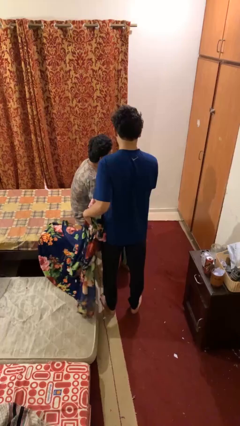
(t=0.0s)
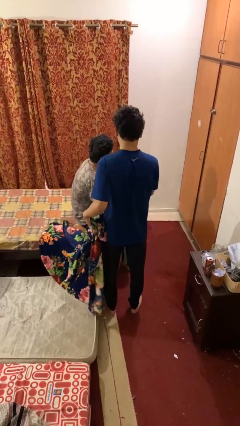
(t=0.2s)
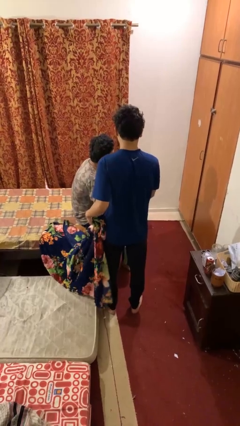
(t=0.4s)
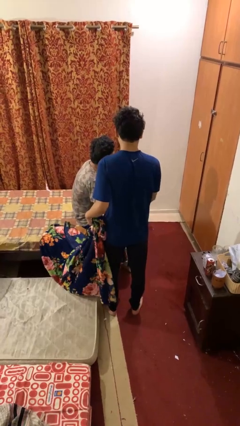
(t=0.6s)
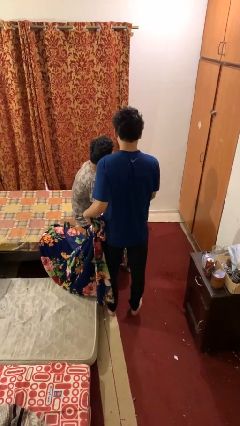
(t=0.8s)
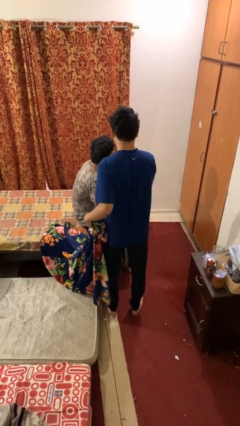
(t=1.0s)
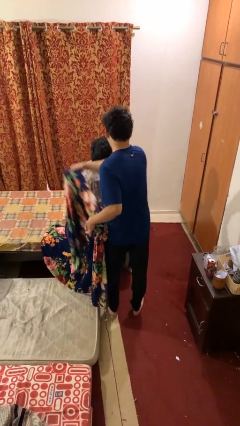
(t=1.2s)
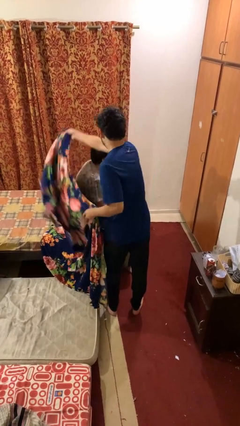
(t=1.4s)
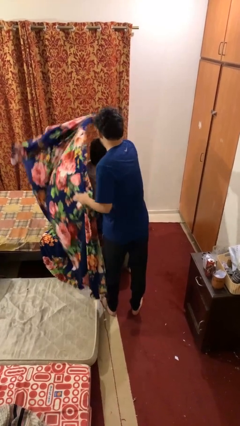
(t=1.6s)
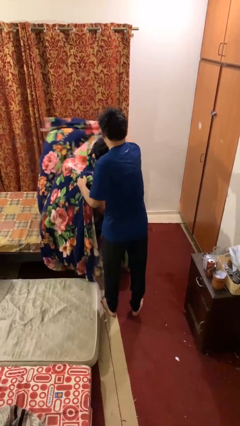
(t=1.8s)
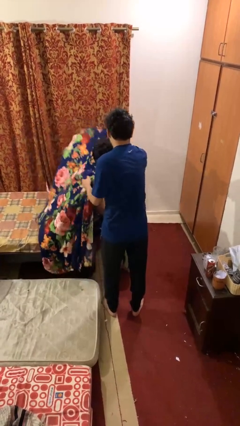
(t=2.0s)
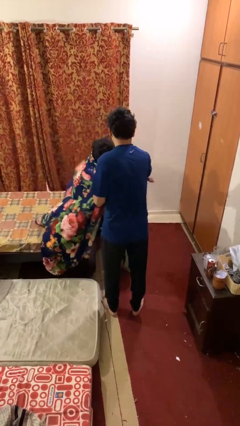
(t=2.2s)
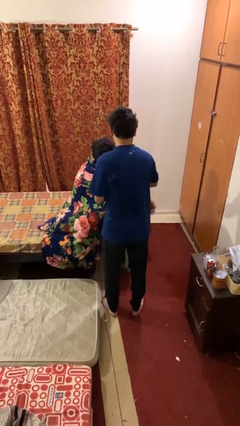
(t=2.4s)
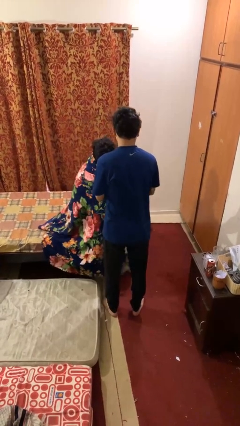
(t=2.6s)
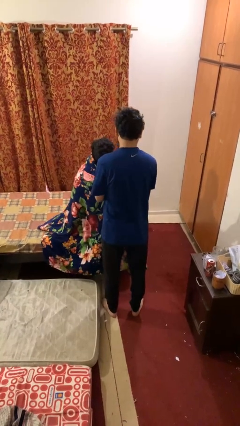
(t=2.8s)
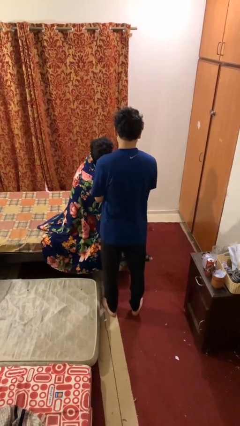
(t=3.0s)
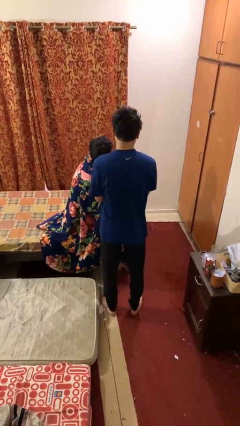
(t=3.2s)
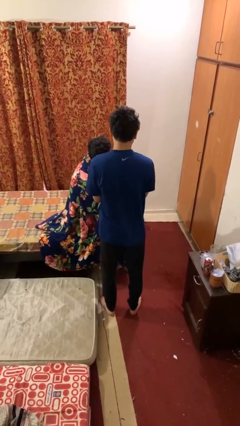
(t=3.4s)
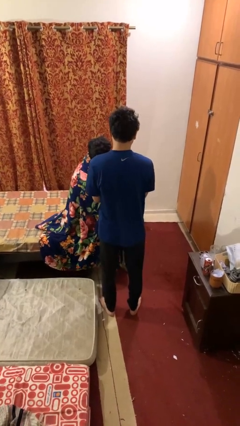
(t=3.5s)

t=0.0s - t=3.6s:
person covers friend with blanket

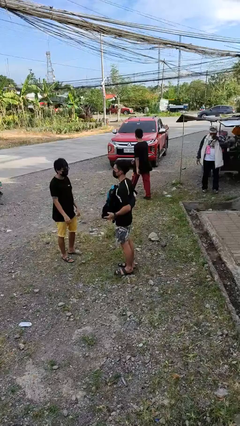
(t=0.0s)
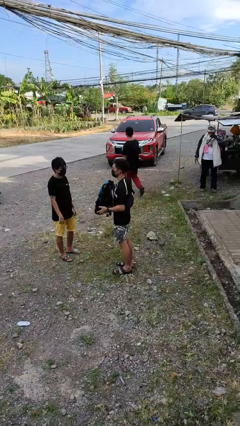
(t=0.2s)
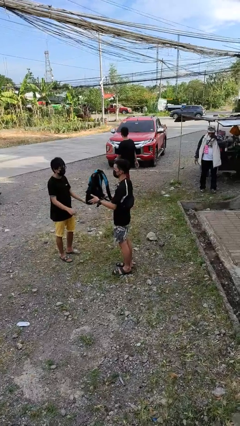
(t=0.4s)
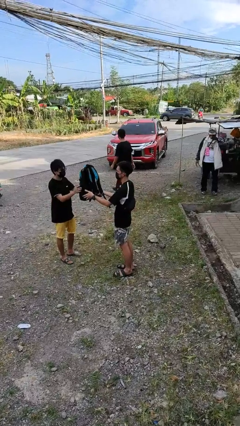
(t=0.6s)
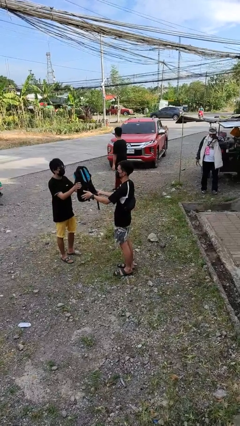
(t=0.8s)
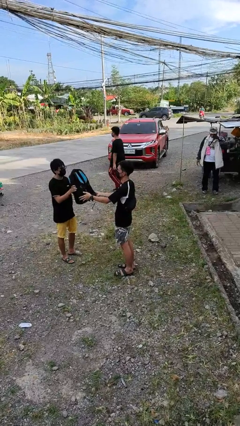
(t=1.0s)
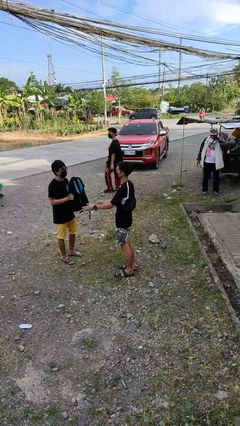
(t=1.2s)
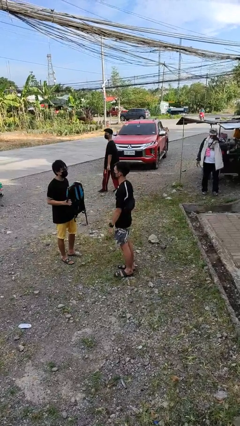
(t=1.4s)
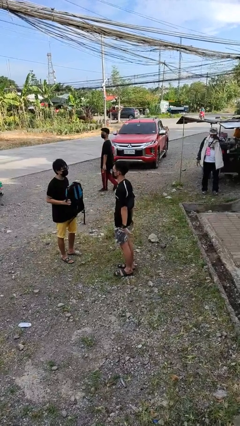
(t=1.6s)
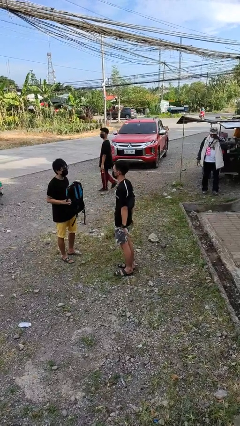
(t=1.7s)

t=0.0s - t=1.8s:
person transfers object to person

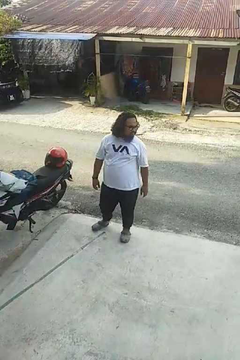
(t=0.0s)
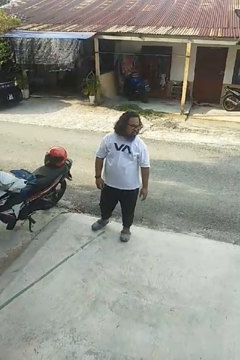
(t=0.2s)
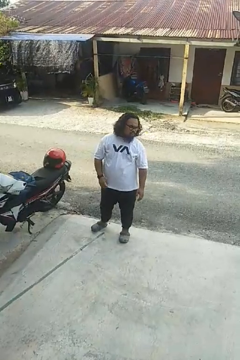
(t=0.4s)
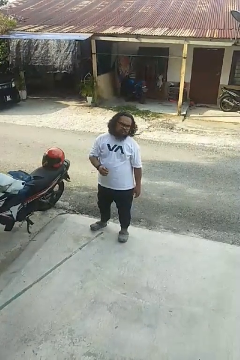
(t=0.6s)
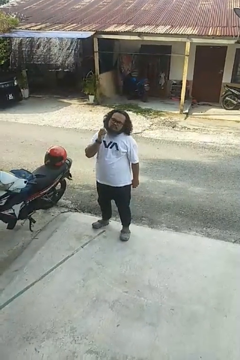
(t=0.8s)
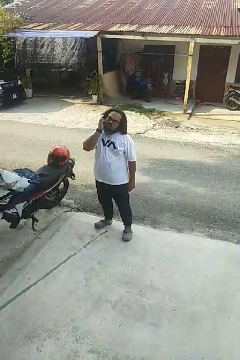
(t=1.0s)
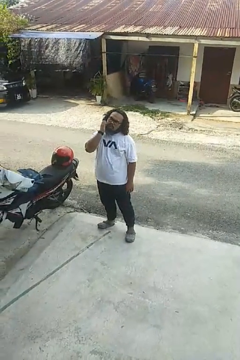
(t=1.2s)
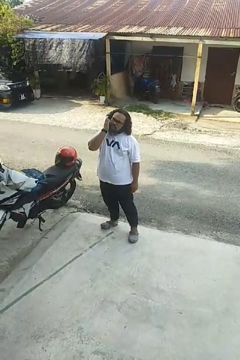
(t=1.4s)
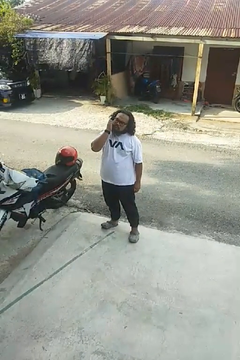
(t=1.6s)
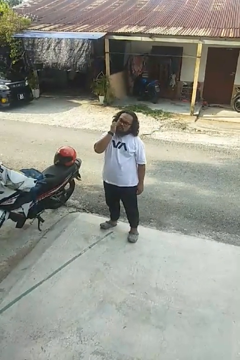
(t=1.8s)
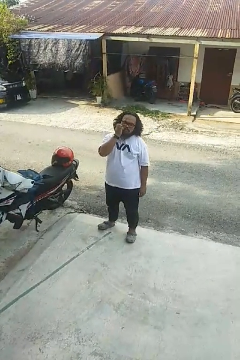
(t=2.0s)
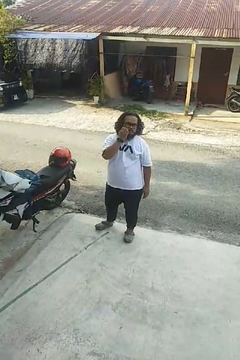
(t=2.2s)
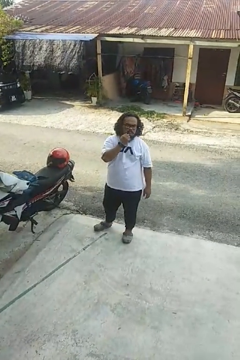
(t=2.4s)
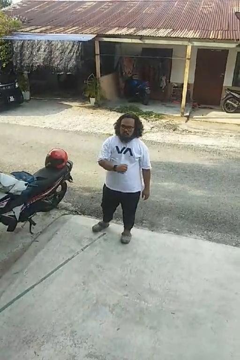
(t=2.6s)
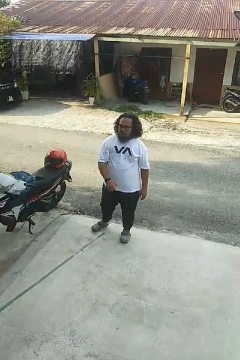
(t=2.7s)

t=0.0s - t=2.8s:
person scratches face

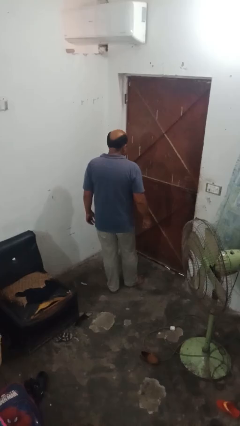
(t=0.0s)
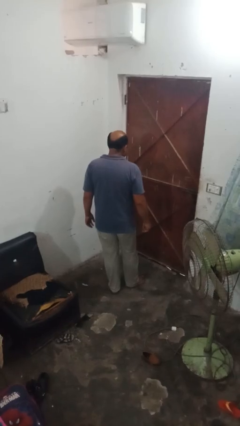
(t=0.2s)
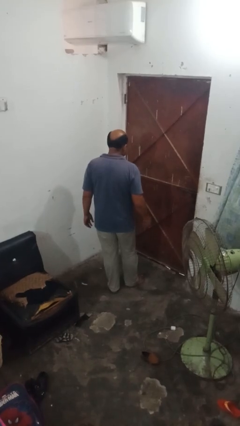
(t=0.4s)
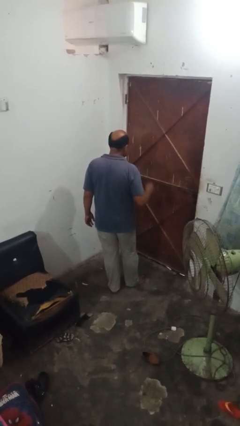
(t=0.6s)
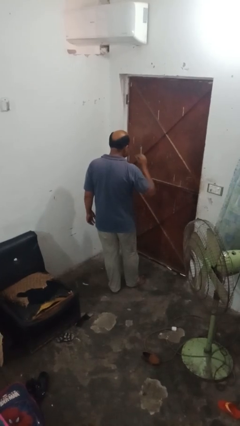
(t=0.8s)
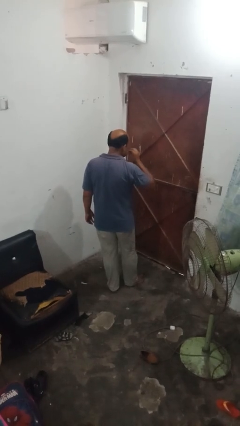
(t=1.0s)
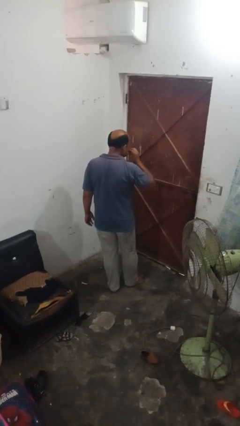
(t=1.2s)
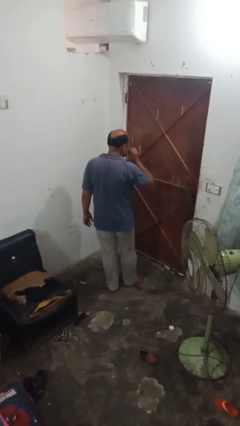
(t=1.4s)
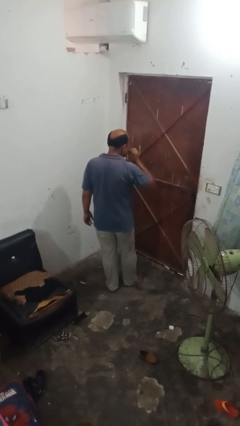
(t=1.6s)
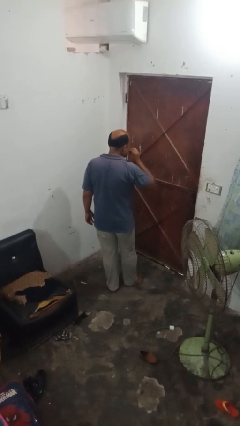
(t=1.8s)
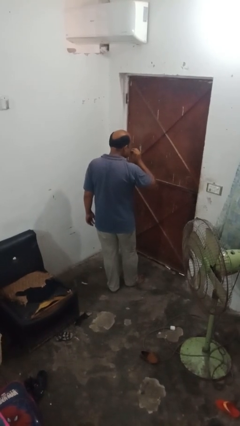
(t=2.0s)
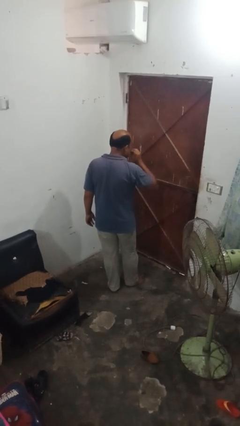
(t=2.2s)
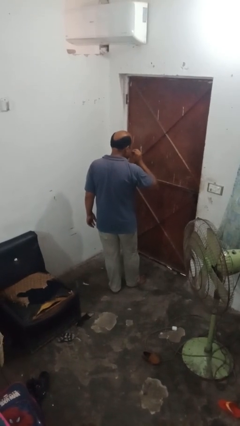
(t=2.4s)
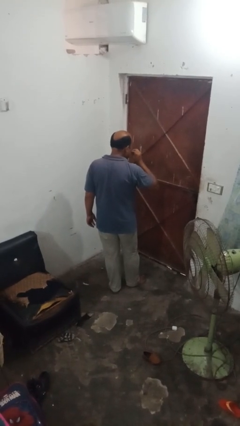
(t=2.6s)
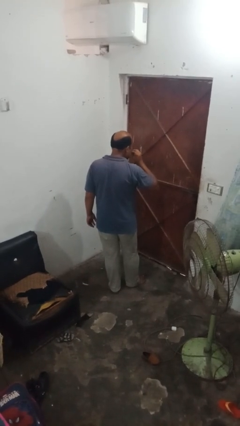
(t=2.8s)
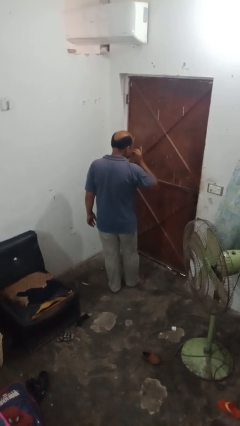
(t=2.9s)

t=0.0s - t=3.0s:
person flosses

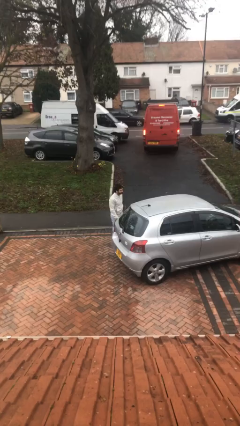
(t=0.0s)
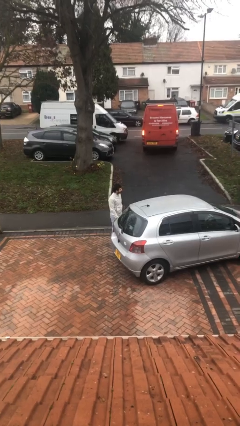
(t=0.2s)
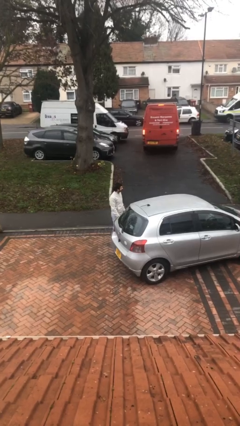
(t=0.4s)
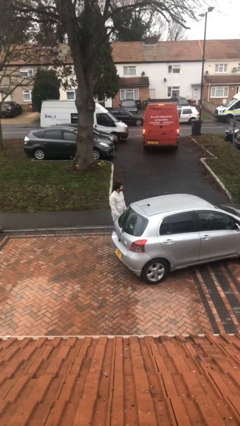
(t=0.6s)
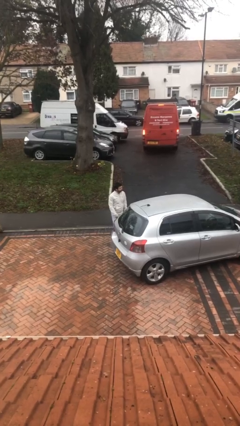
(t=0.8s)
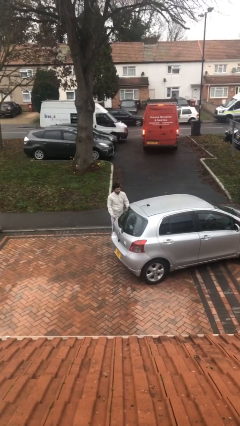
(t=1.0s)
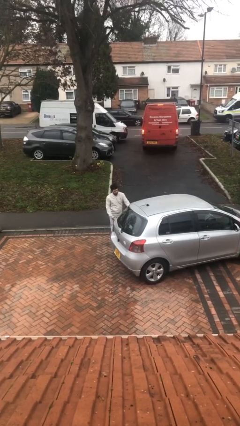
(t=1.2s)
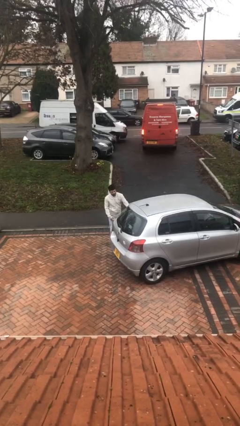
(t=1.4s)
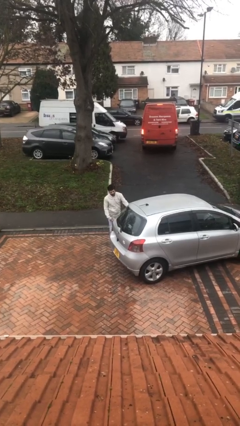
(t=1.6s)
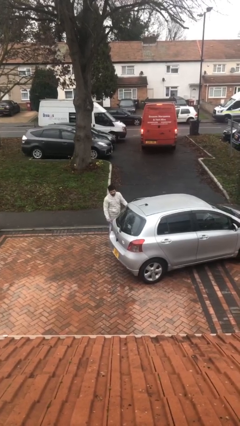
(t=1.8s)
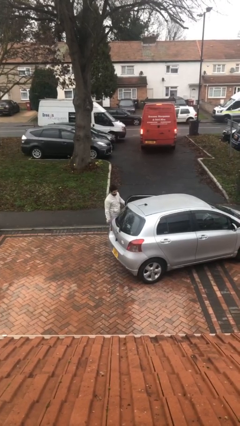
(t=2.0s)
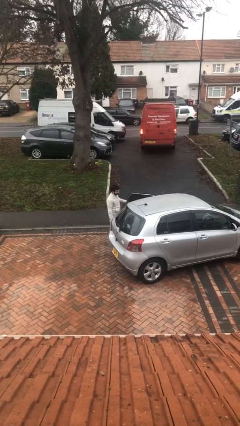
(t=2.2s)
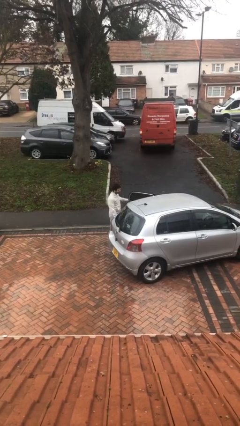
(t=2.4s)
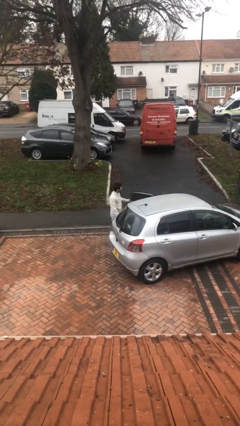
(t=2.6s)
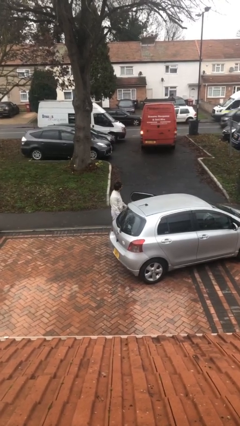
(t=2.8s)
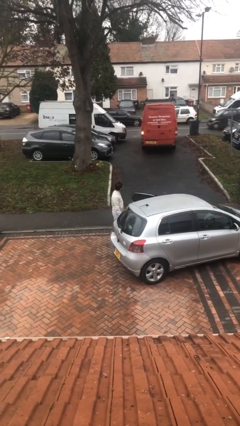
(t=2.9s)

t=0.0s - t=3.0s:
person opens car door

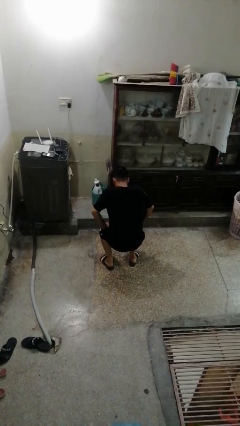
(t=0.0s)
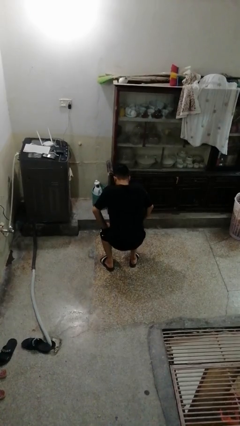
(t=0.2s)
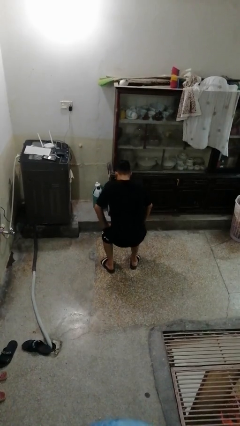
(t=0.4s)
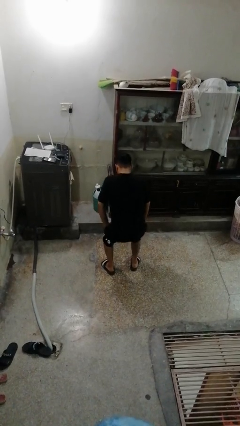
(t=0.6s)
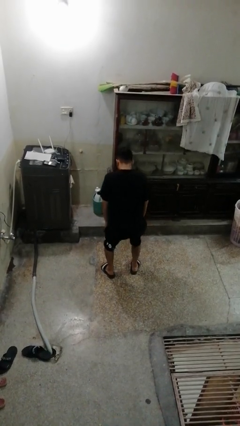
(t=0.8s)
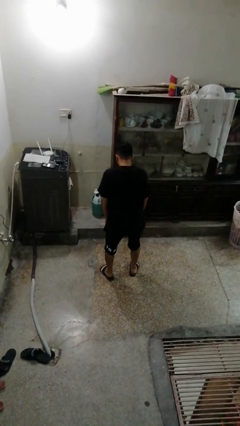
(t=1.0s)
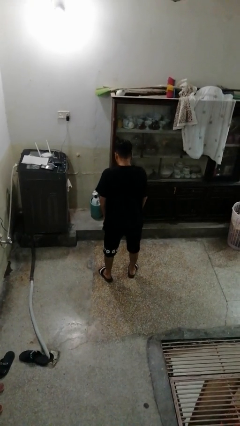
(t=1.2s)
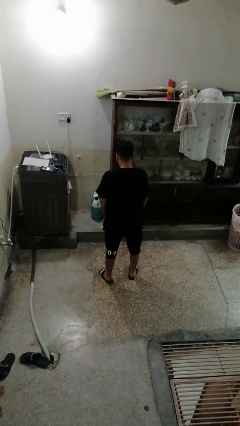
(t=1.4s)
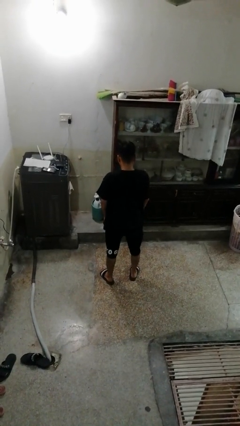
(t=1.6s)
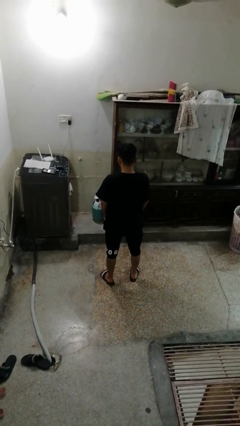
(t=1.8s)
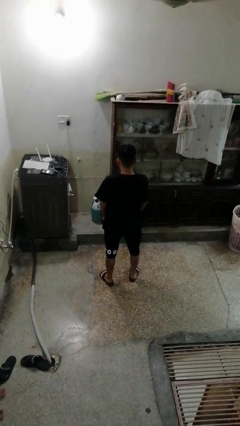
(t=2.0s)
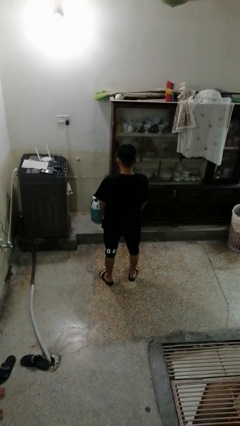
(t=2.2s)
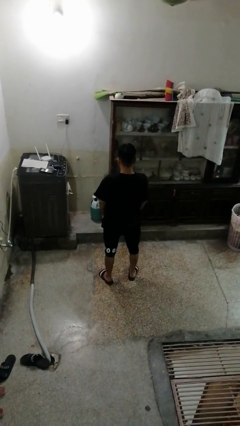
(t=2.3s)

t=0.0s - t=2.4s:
person stands up
